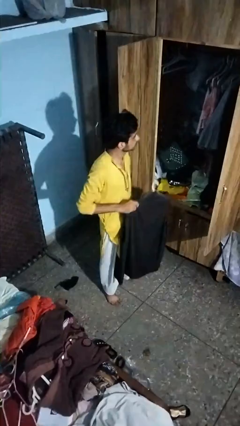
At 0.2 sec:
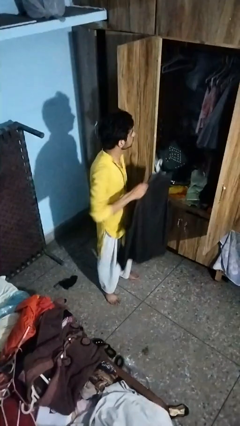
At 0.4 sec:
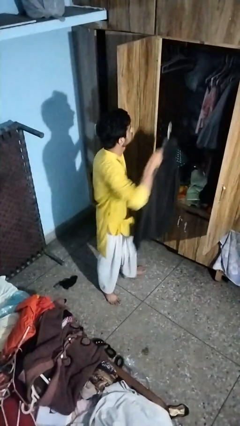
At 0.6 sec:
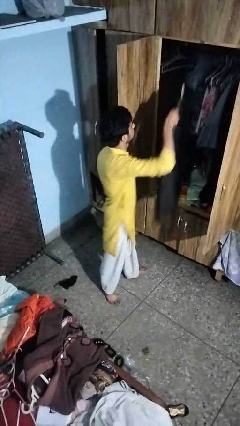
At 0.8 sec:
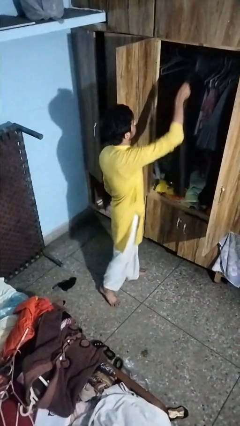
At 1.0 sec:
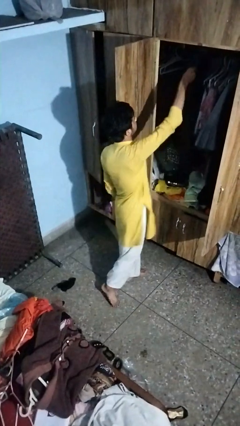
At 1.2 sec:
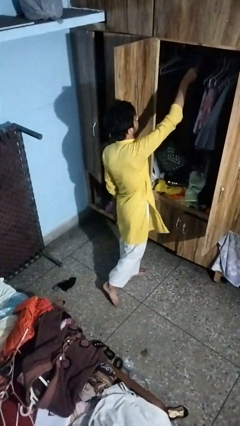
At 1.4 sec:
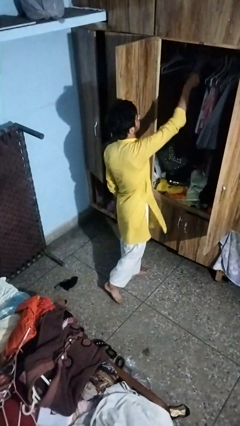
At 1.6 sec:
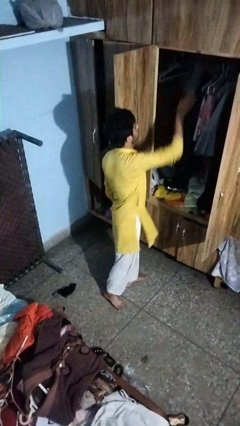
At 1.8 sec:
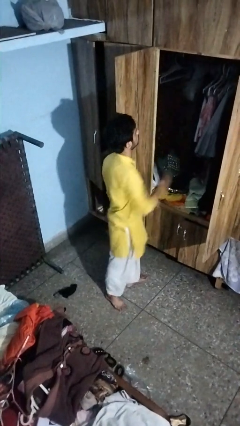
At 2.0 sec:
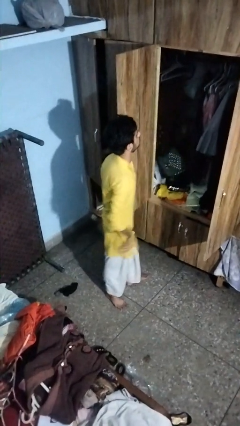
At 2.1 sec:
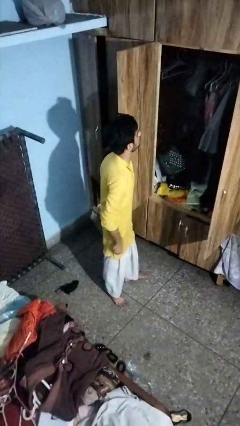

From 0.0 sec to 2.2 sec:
person puts clothes into closet

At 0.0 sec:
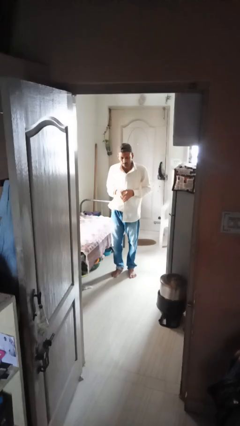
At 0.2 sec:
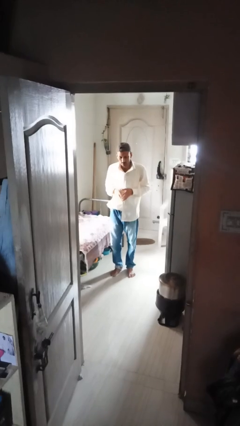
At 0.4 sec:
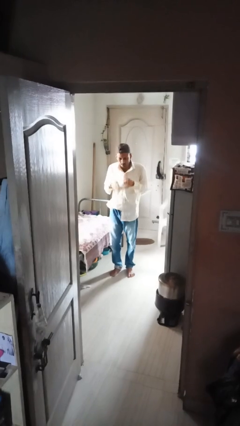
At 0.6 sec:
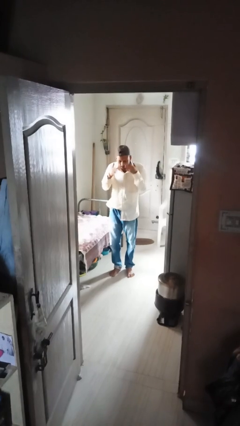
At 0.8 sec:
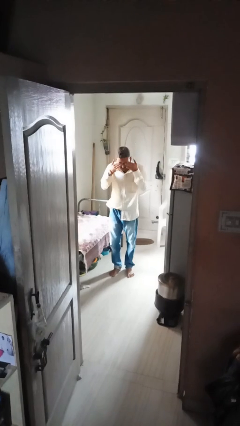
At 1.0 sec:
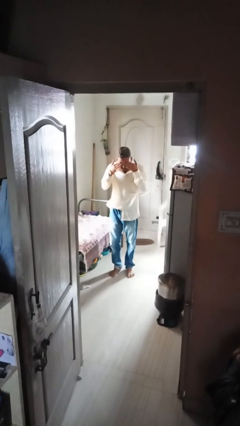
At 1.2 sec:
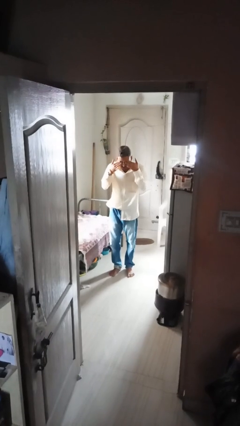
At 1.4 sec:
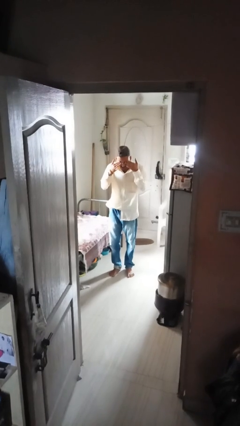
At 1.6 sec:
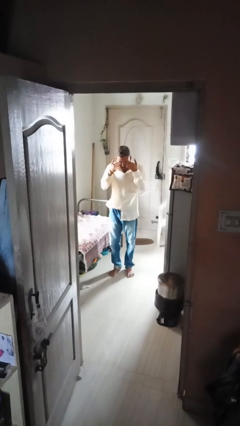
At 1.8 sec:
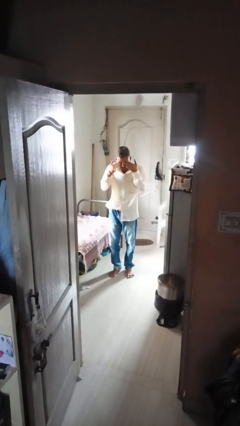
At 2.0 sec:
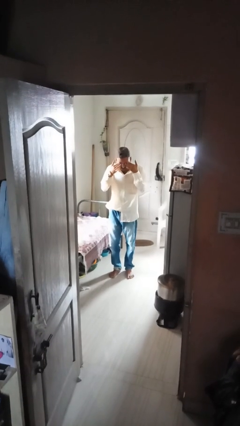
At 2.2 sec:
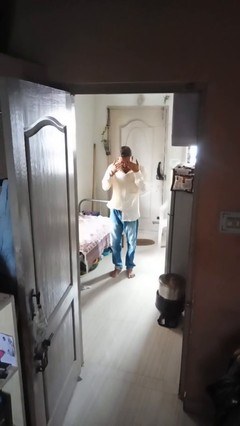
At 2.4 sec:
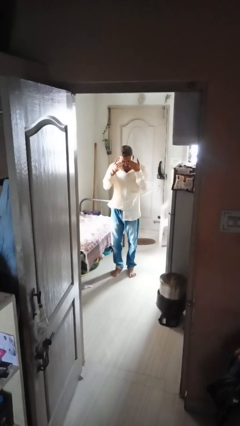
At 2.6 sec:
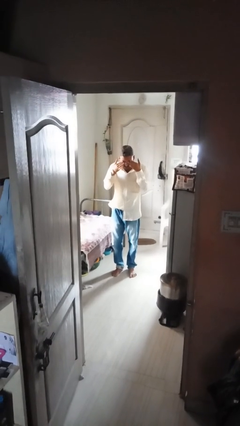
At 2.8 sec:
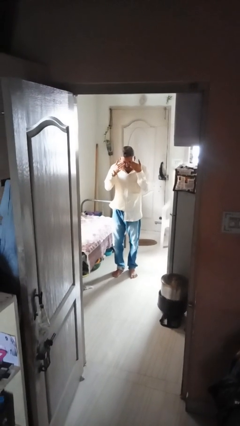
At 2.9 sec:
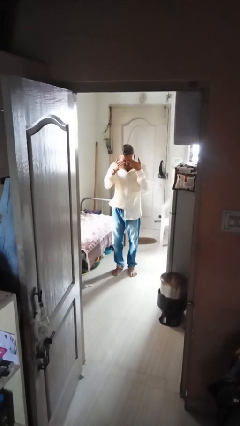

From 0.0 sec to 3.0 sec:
person rubs eyes

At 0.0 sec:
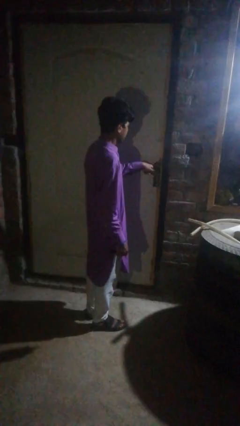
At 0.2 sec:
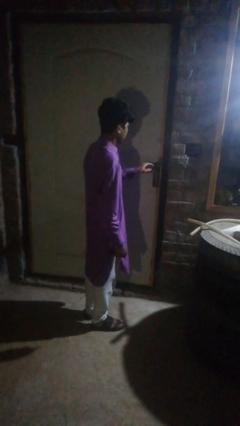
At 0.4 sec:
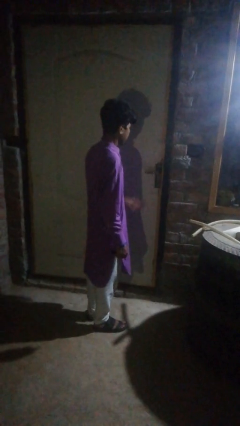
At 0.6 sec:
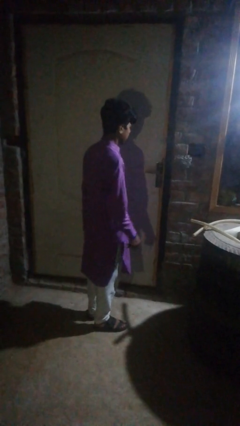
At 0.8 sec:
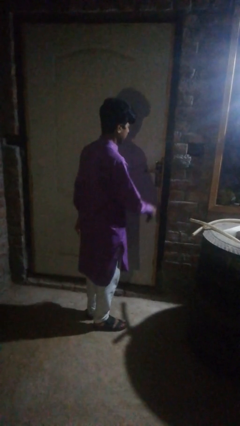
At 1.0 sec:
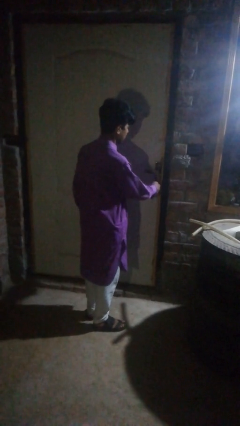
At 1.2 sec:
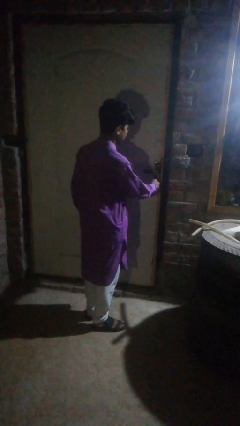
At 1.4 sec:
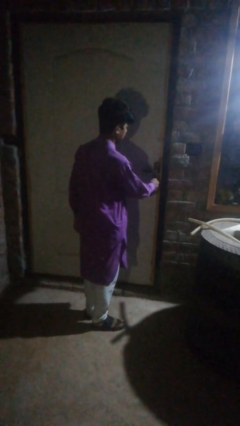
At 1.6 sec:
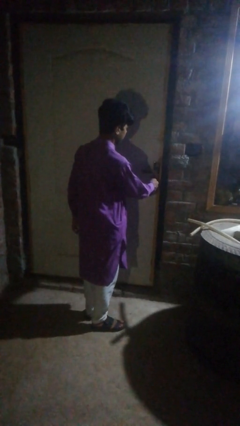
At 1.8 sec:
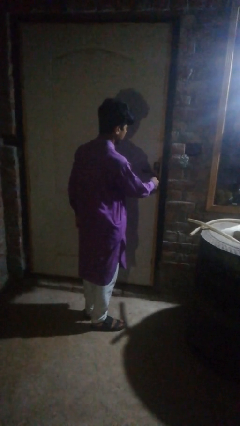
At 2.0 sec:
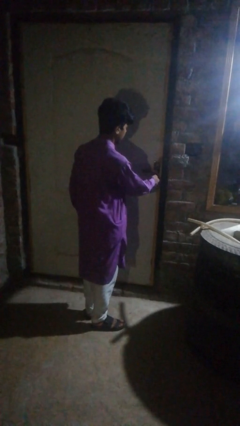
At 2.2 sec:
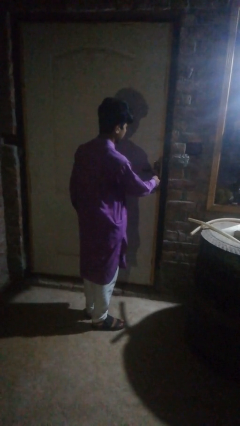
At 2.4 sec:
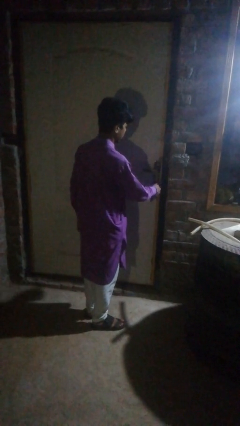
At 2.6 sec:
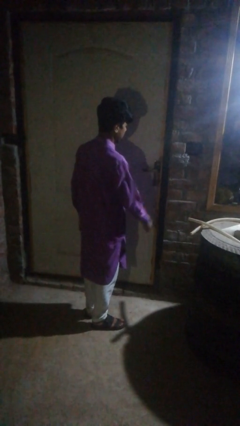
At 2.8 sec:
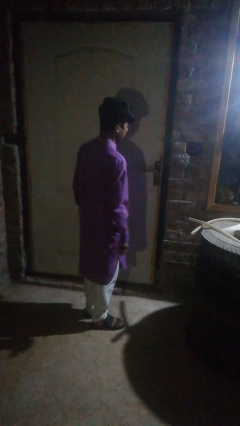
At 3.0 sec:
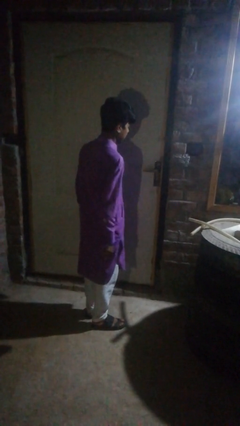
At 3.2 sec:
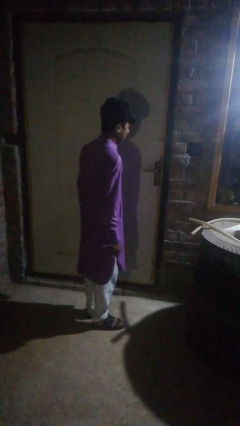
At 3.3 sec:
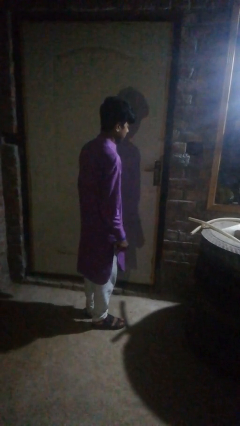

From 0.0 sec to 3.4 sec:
person locks door with keys

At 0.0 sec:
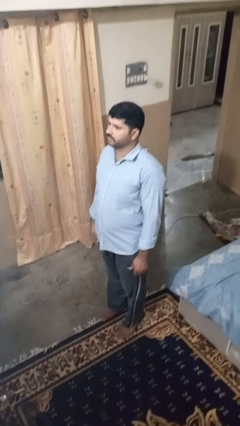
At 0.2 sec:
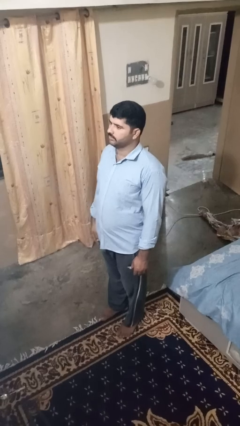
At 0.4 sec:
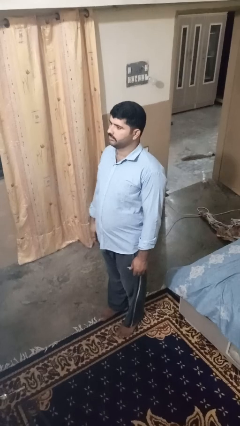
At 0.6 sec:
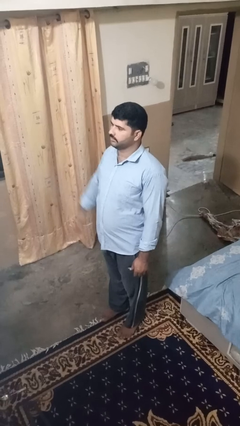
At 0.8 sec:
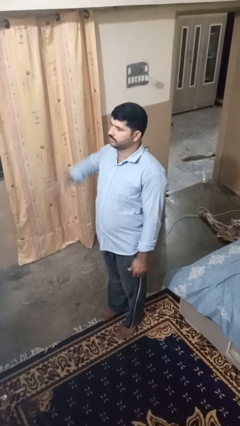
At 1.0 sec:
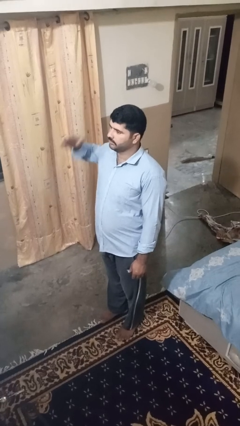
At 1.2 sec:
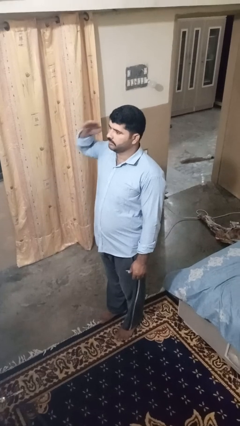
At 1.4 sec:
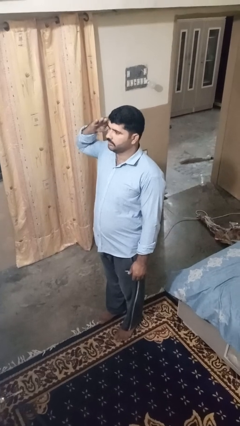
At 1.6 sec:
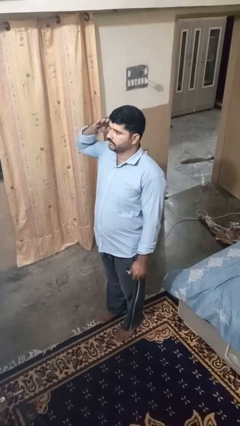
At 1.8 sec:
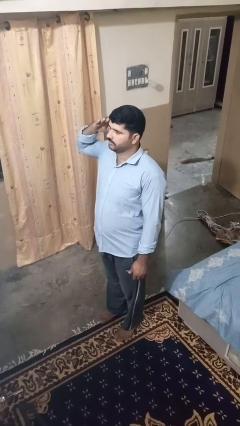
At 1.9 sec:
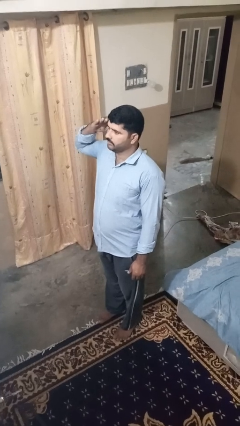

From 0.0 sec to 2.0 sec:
person salutes

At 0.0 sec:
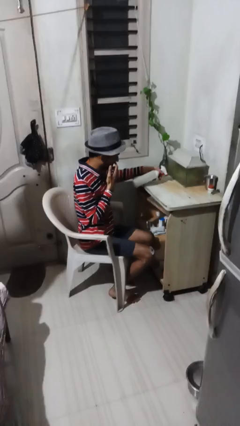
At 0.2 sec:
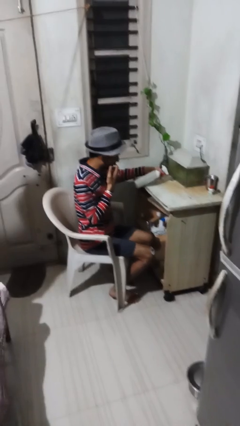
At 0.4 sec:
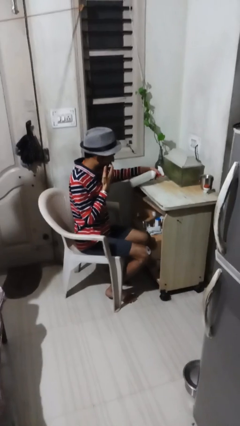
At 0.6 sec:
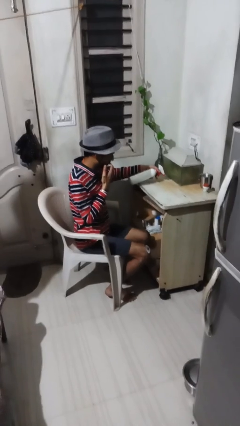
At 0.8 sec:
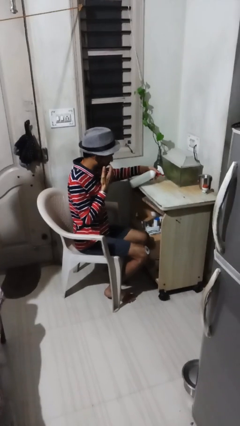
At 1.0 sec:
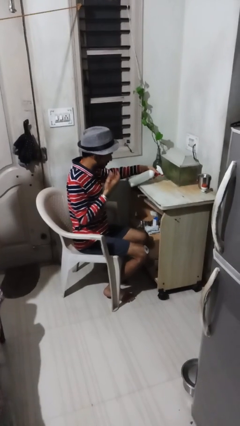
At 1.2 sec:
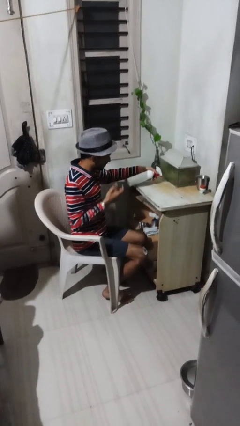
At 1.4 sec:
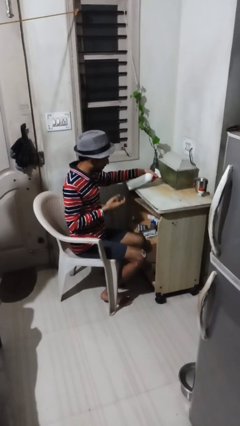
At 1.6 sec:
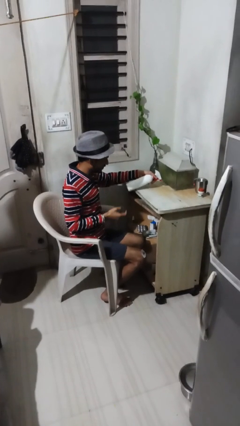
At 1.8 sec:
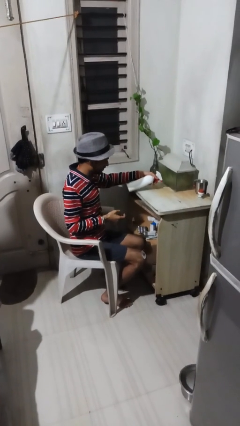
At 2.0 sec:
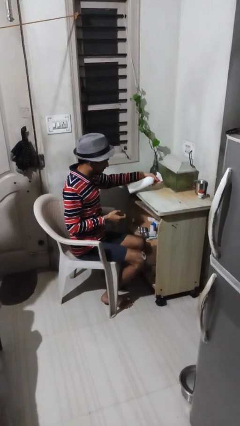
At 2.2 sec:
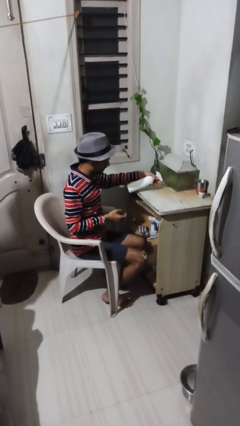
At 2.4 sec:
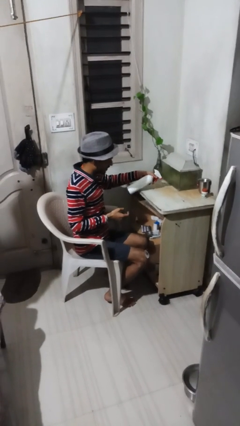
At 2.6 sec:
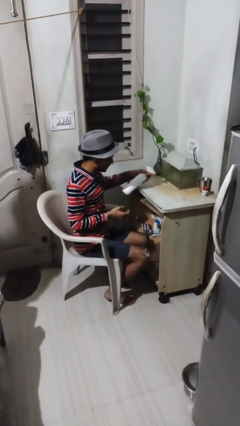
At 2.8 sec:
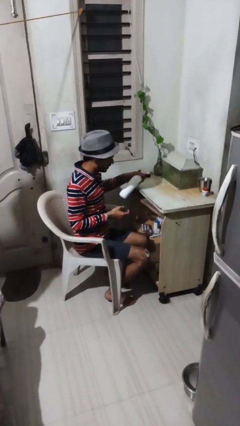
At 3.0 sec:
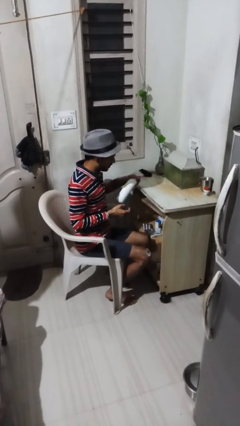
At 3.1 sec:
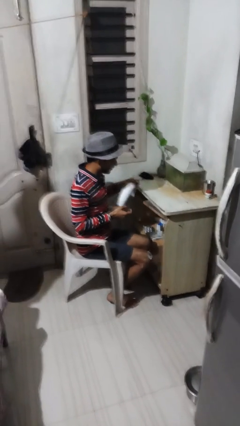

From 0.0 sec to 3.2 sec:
person sprays from bottle

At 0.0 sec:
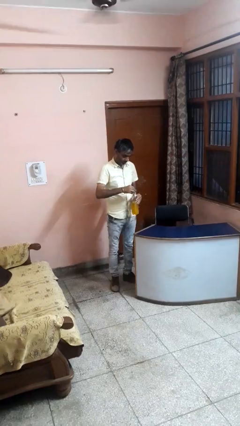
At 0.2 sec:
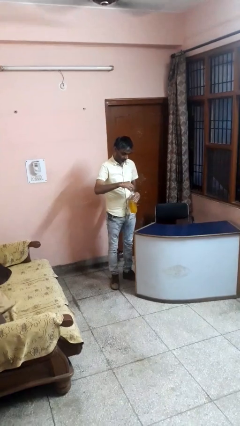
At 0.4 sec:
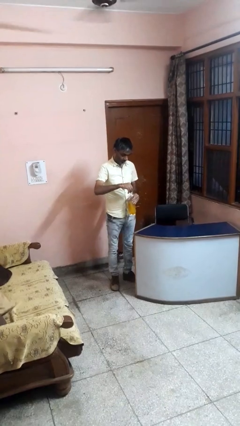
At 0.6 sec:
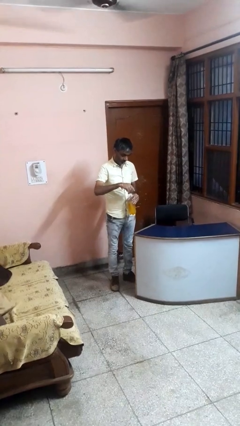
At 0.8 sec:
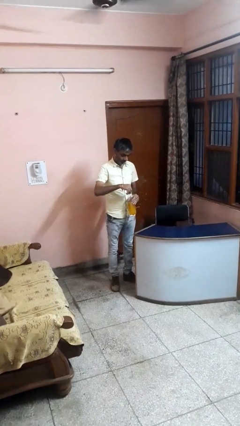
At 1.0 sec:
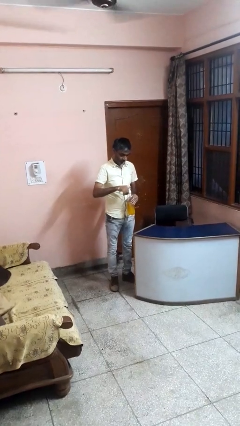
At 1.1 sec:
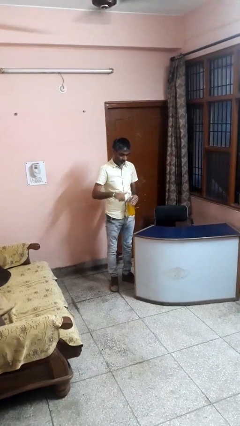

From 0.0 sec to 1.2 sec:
person screws lid to bottle

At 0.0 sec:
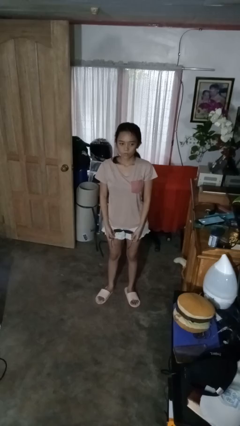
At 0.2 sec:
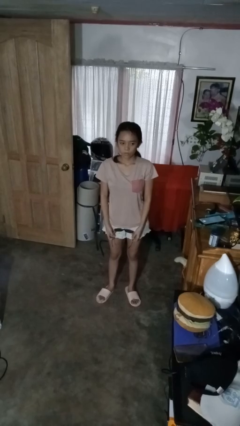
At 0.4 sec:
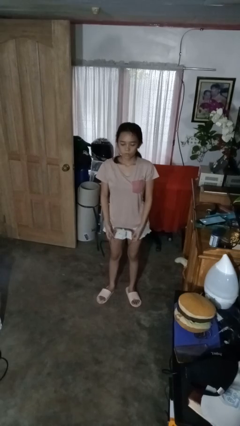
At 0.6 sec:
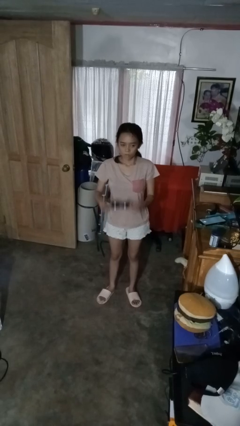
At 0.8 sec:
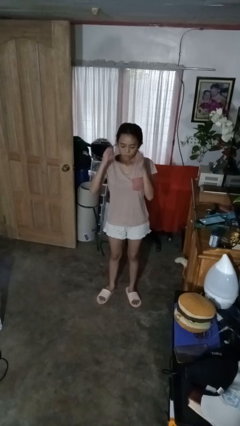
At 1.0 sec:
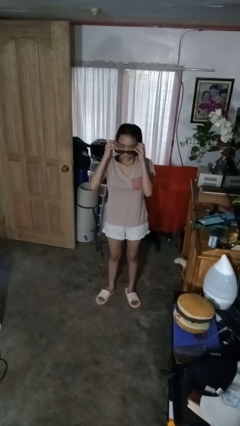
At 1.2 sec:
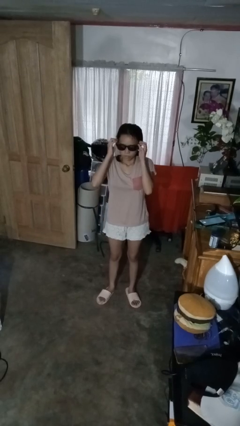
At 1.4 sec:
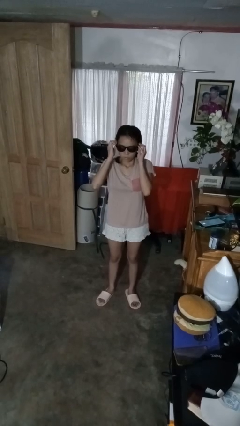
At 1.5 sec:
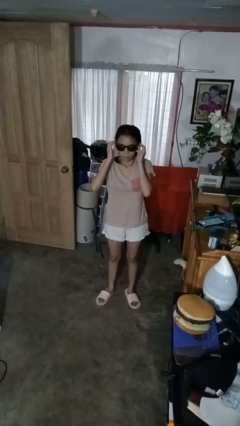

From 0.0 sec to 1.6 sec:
person puts on sunglasses
